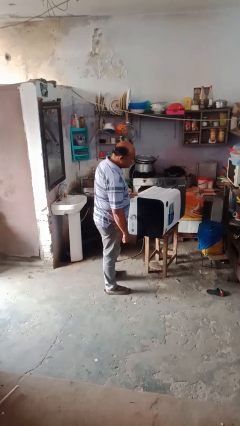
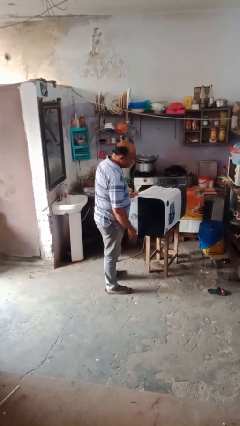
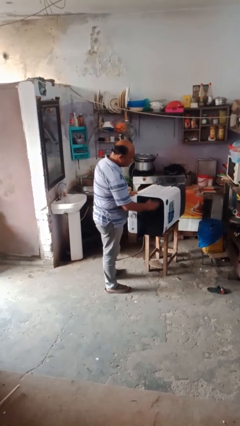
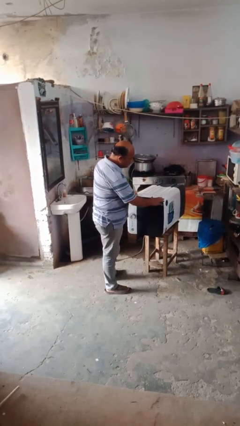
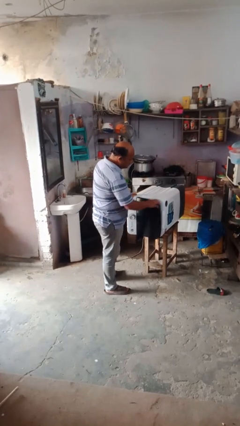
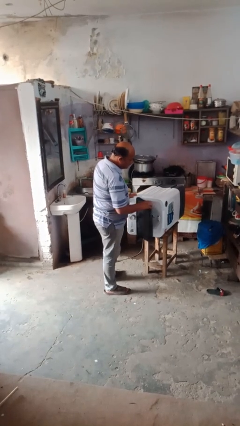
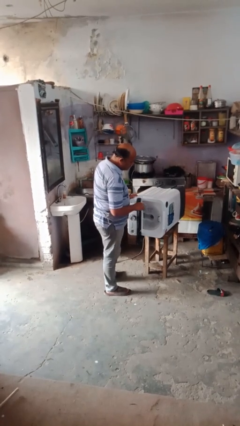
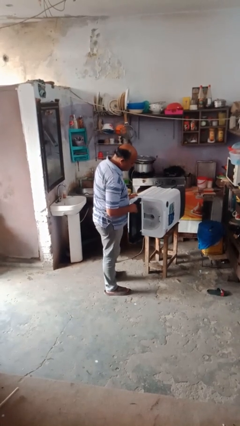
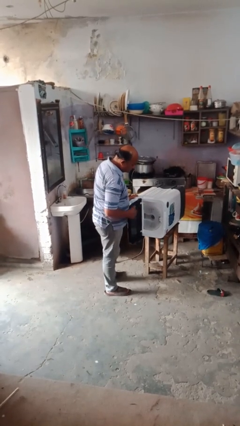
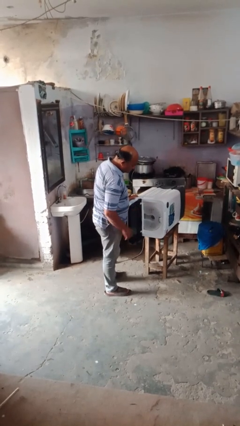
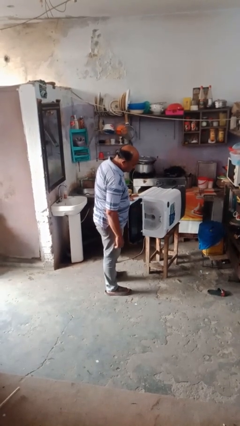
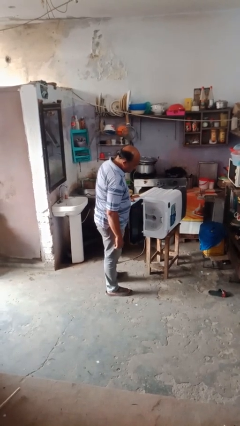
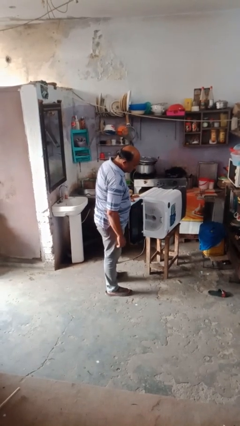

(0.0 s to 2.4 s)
person opens dishwasher

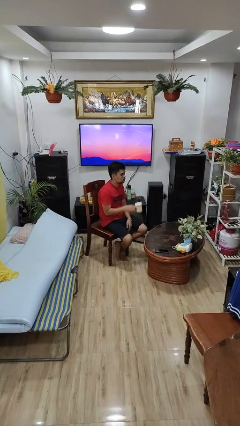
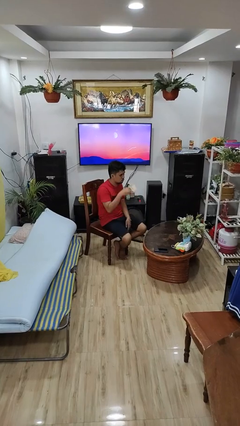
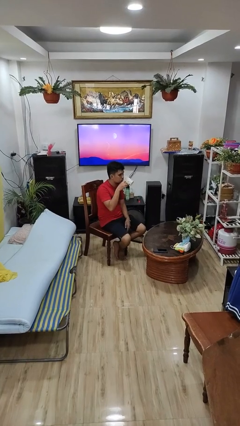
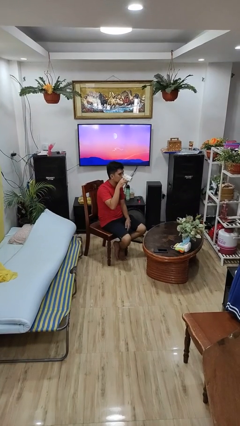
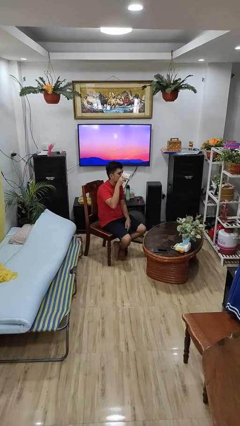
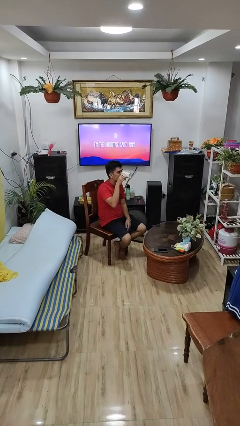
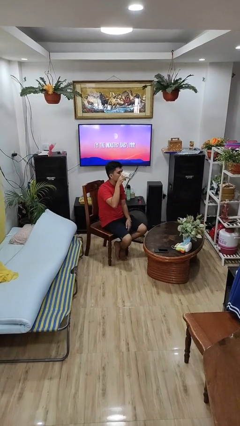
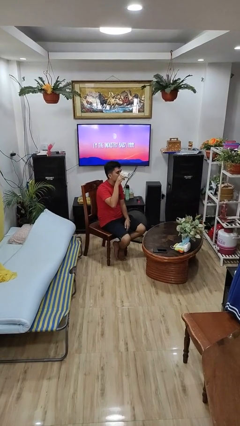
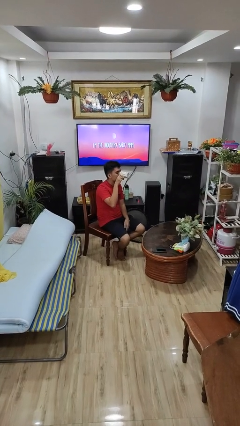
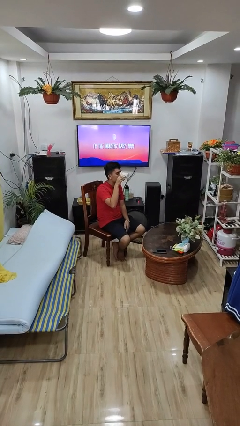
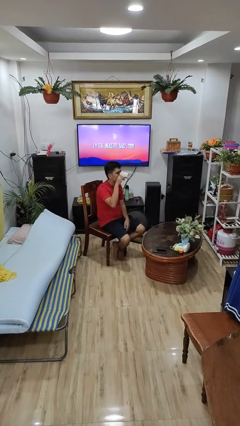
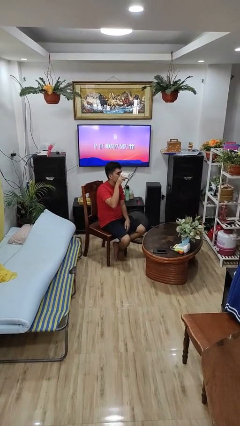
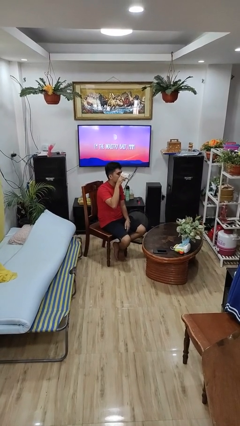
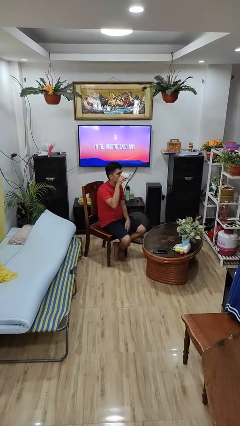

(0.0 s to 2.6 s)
person drinks from mug

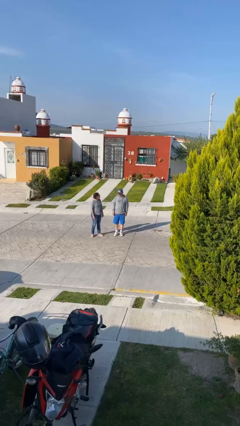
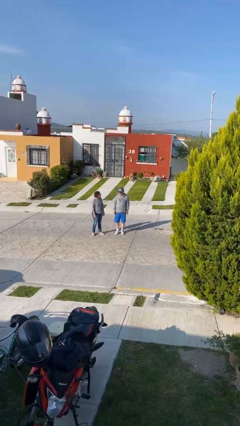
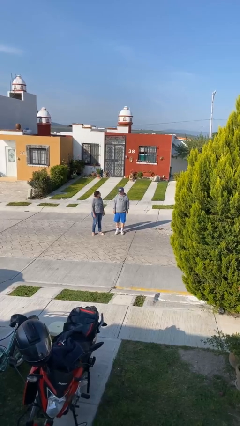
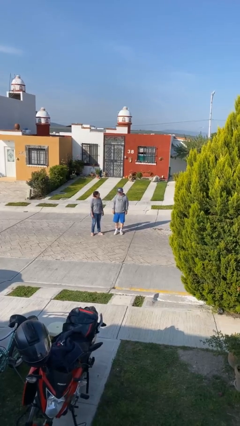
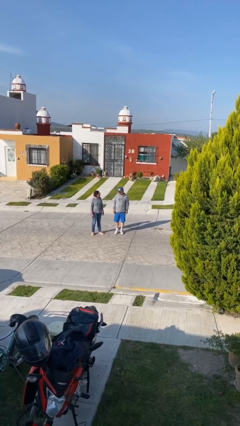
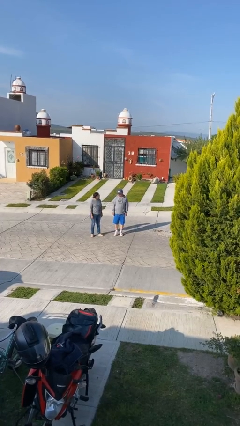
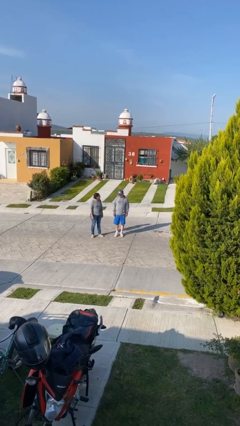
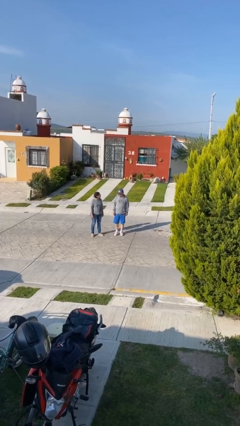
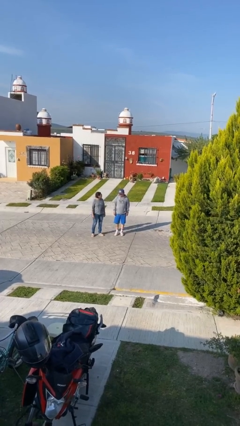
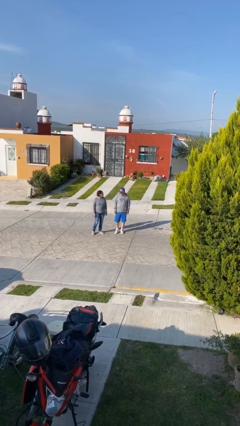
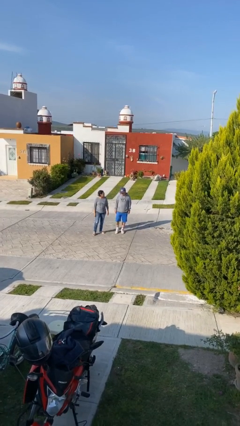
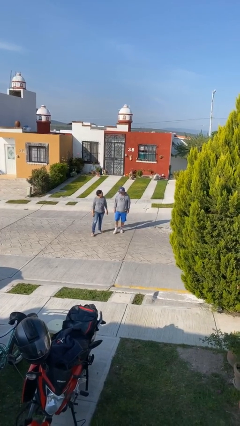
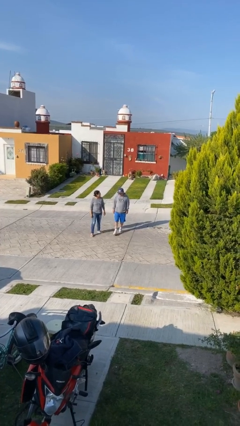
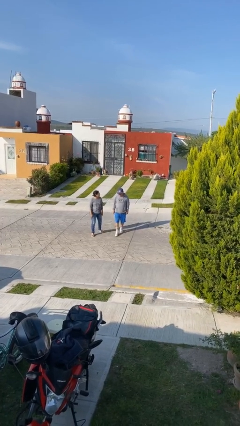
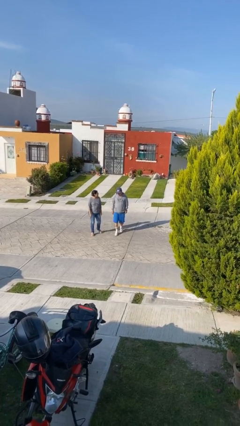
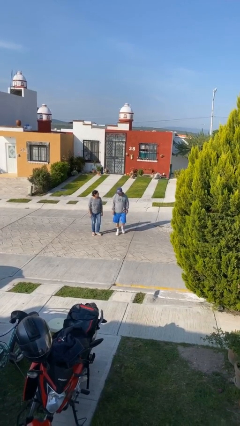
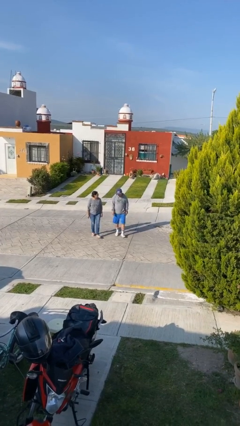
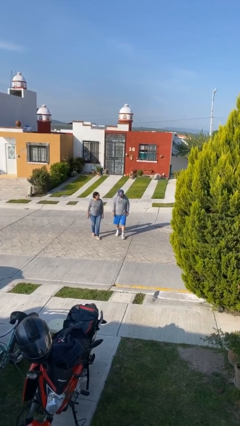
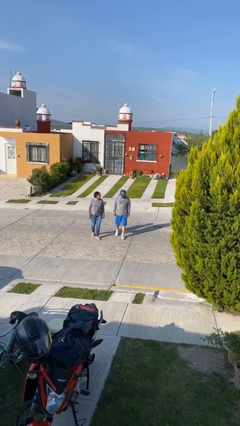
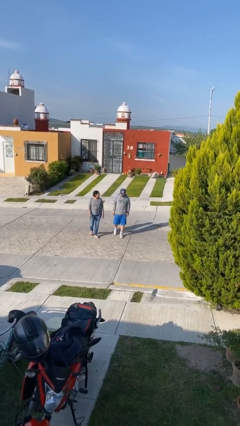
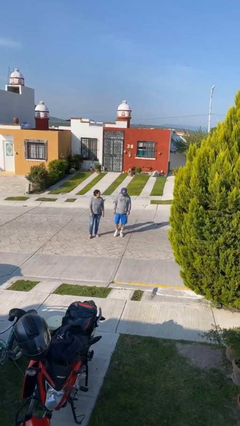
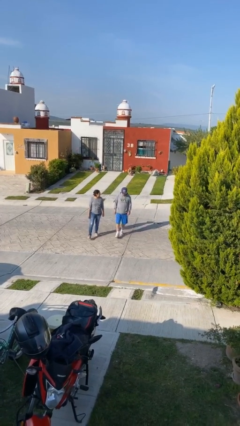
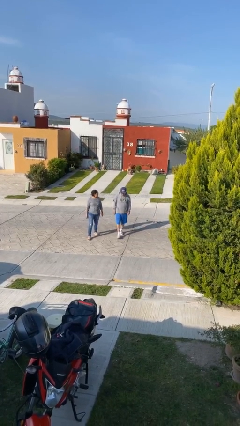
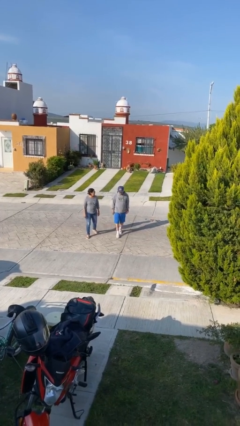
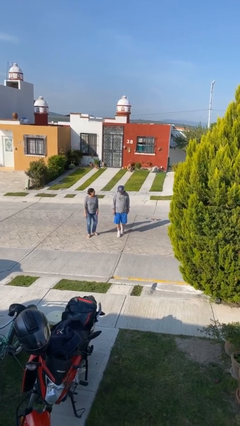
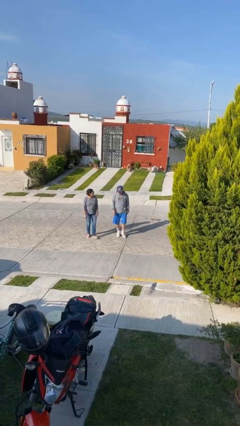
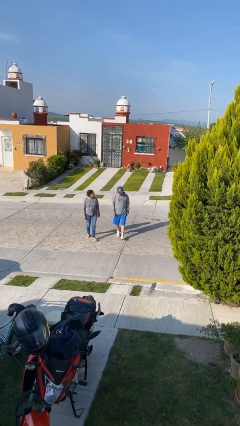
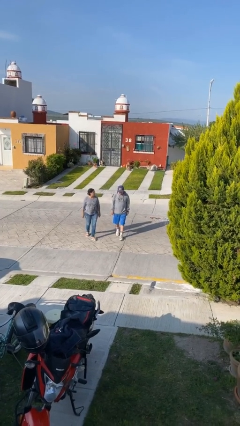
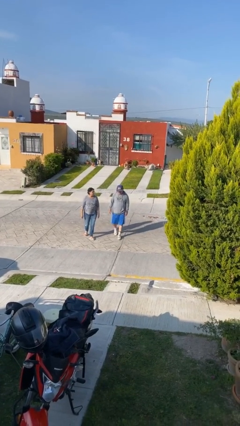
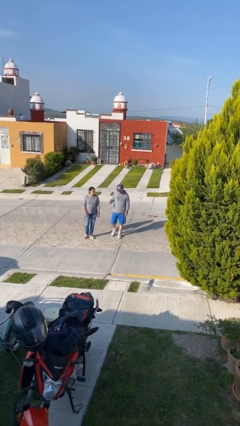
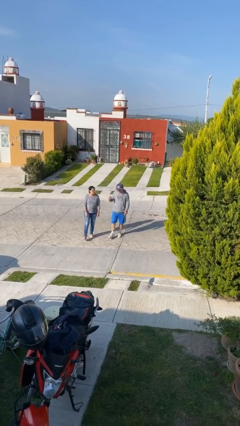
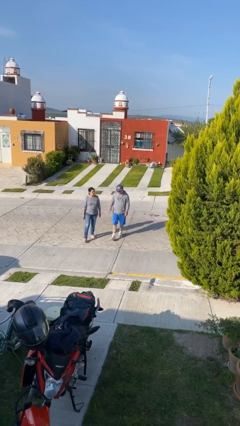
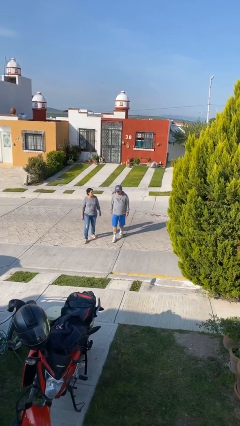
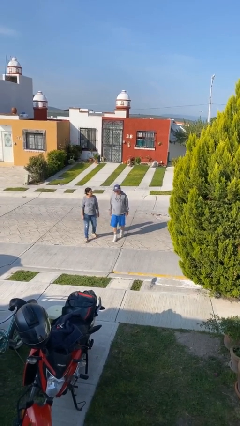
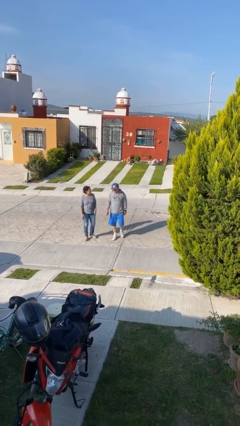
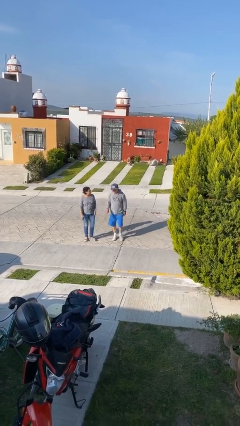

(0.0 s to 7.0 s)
person talks to person

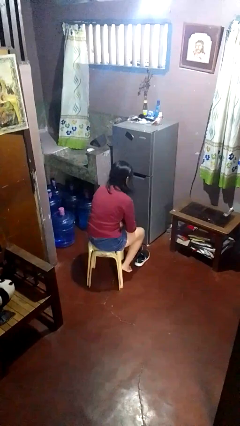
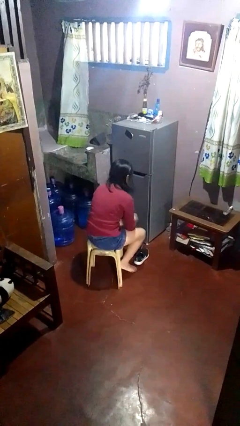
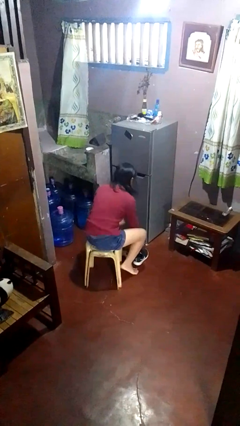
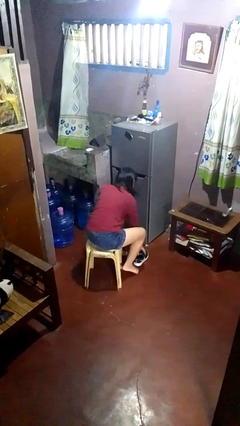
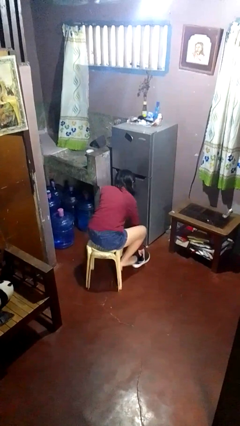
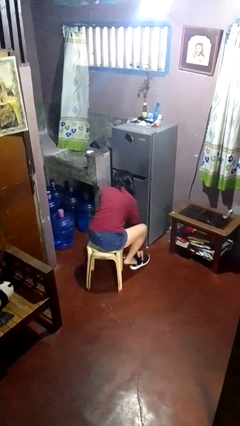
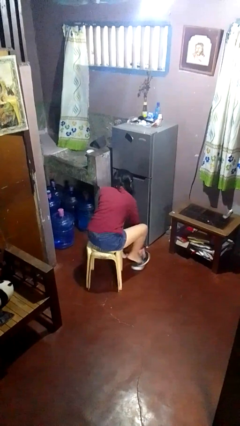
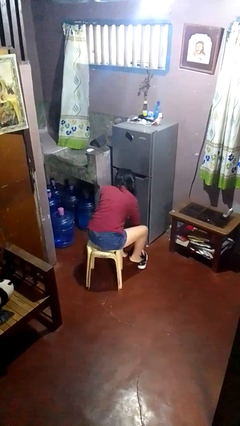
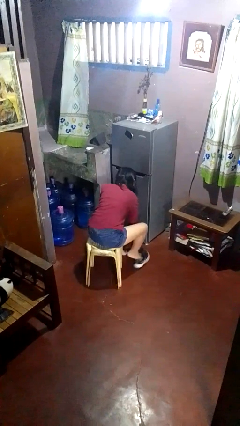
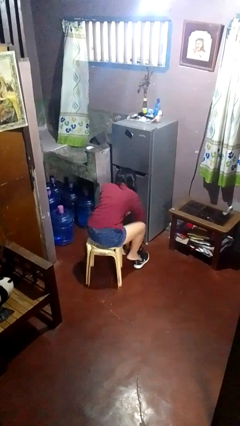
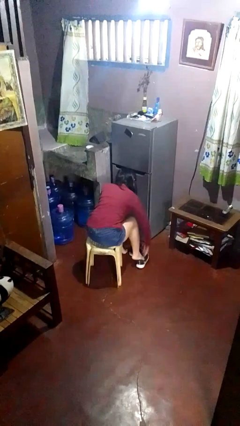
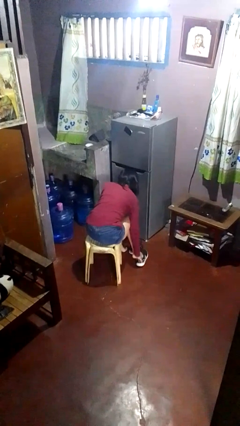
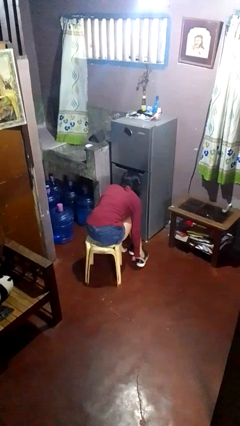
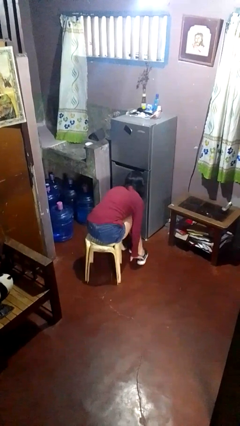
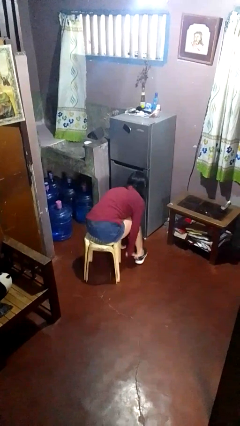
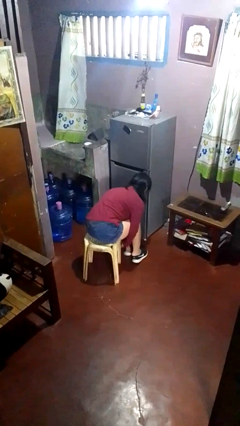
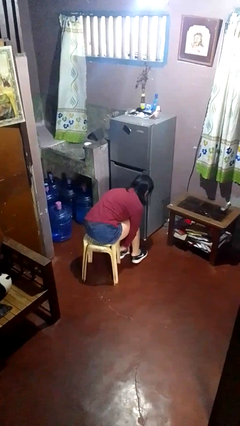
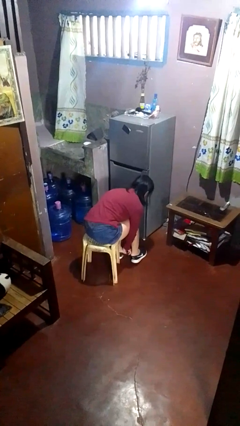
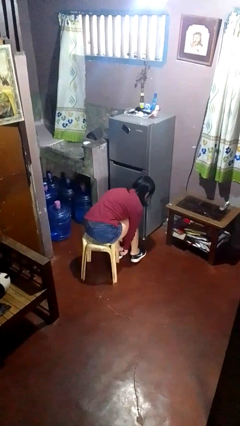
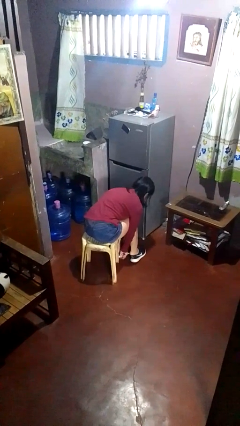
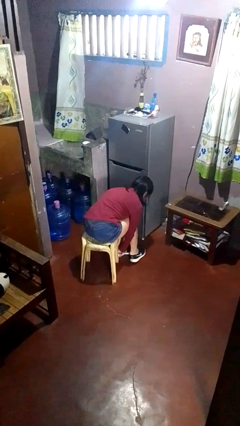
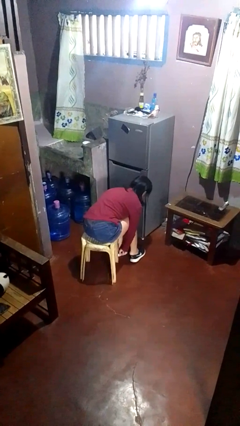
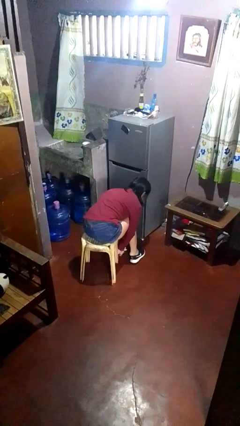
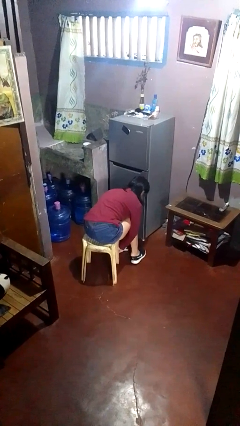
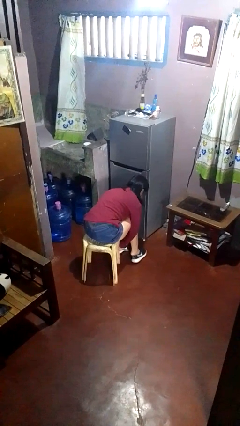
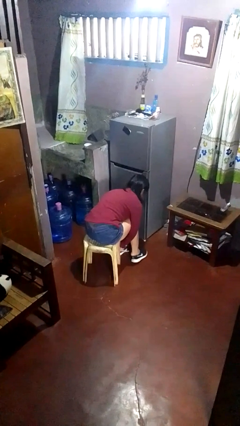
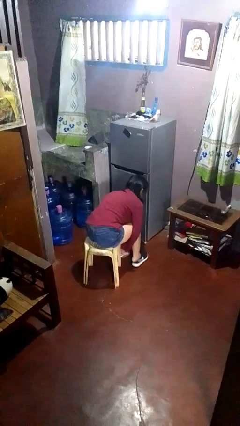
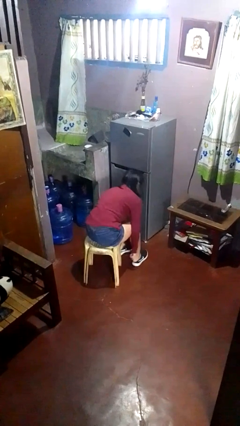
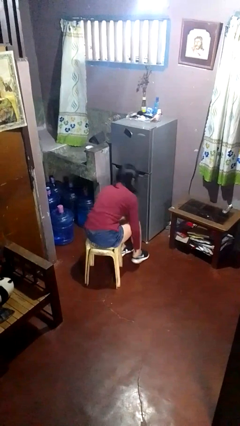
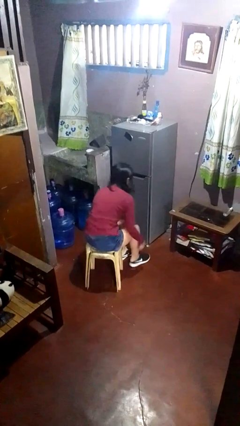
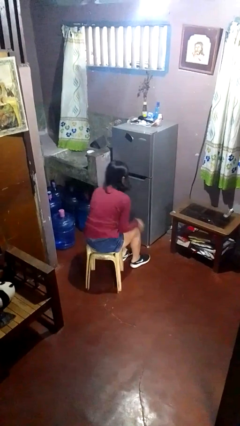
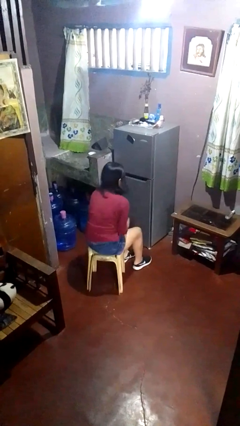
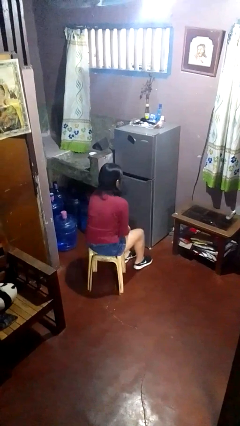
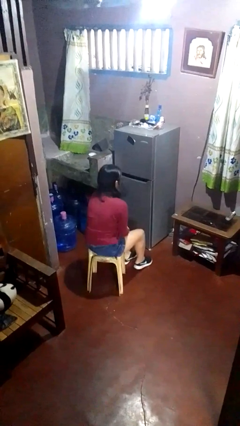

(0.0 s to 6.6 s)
person puts on shoes
